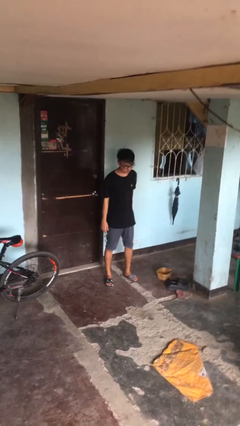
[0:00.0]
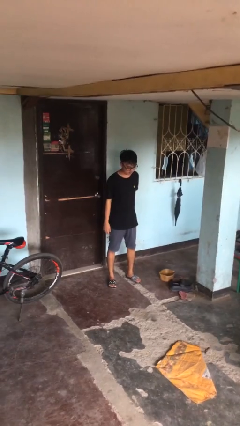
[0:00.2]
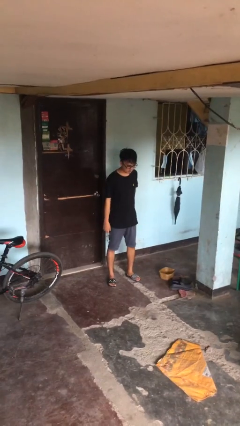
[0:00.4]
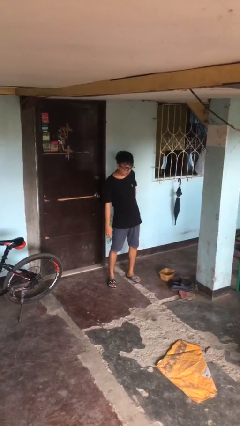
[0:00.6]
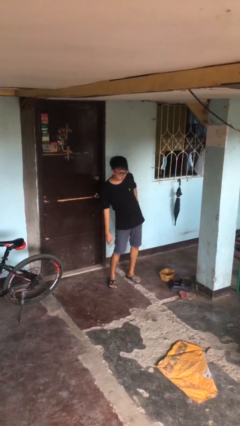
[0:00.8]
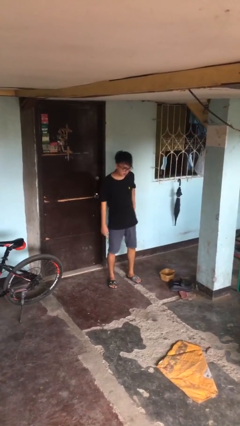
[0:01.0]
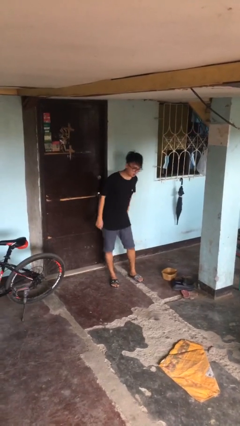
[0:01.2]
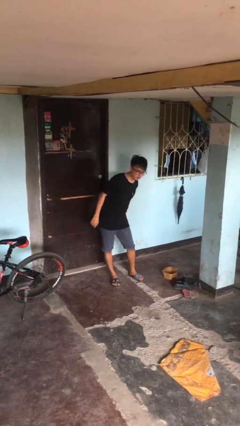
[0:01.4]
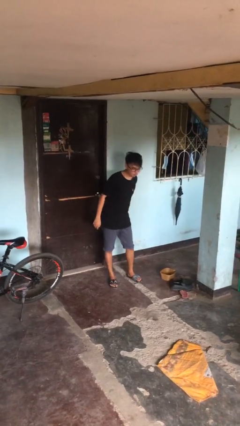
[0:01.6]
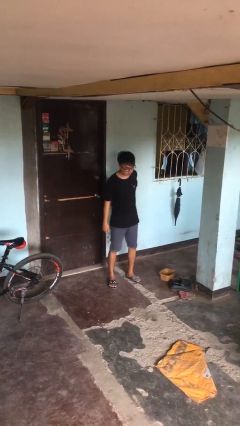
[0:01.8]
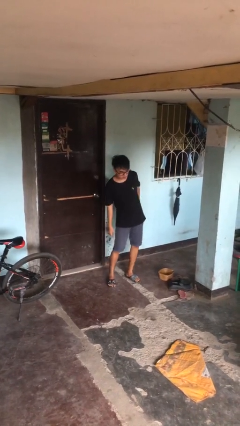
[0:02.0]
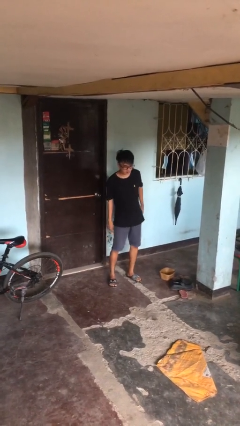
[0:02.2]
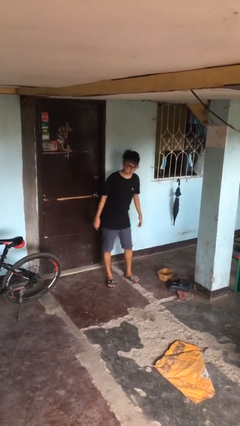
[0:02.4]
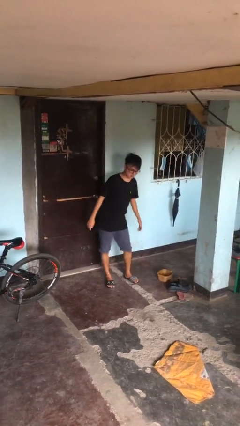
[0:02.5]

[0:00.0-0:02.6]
person wiggles hips

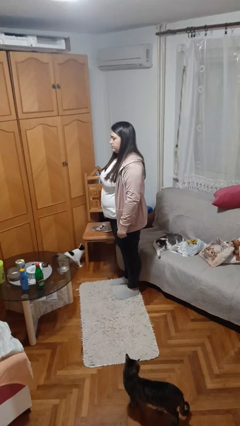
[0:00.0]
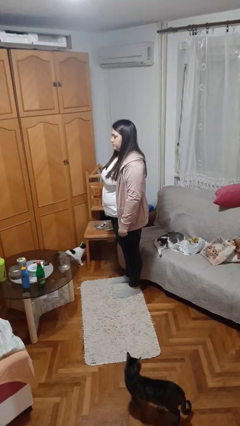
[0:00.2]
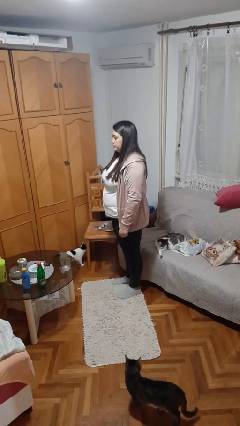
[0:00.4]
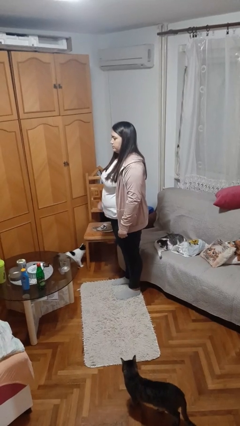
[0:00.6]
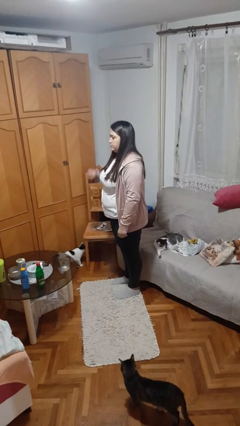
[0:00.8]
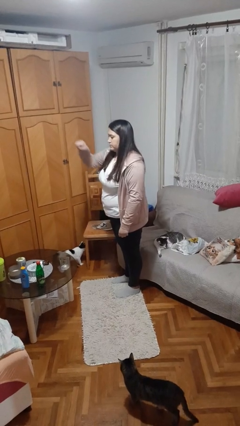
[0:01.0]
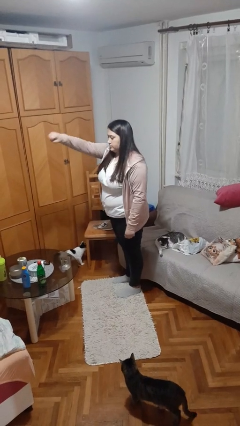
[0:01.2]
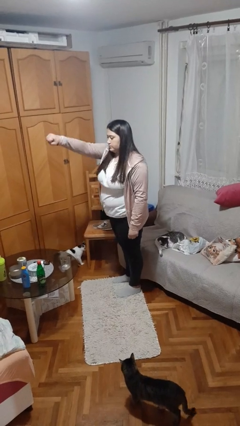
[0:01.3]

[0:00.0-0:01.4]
person punches

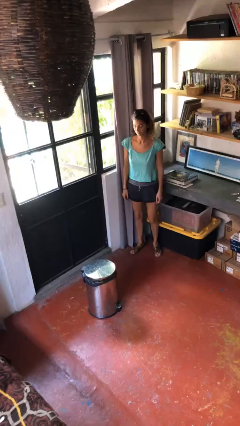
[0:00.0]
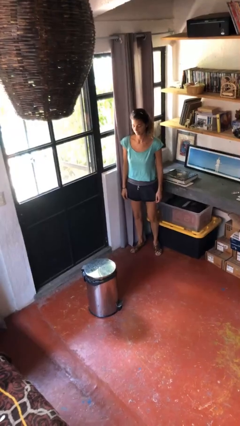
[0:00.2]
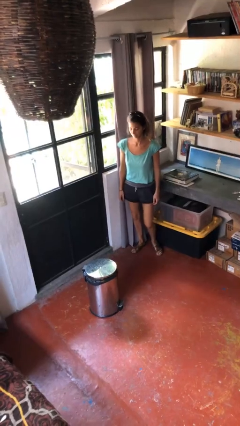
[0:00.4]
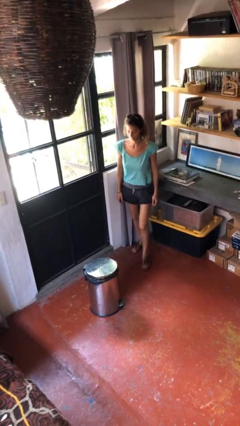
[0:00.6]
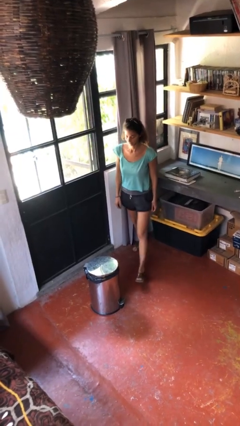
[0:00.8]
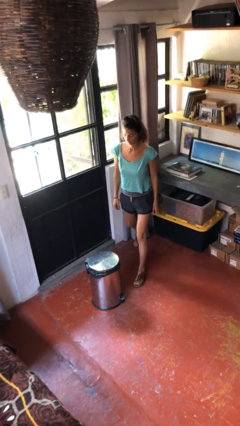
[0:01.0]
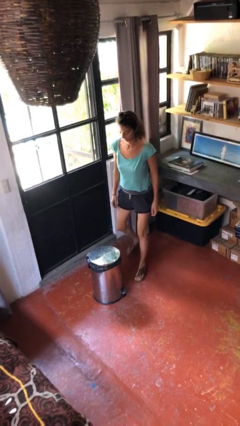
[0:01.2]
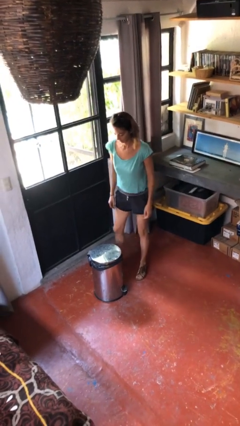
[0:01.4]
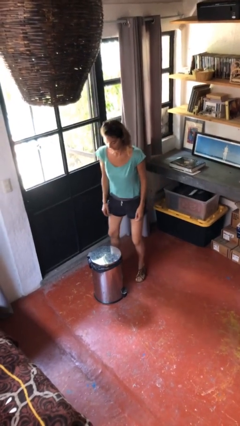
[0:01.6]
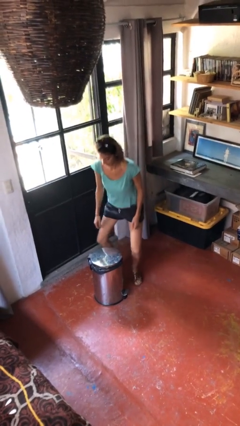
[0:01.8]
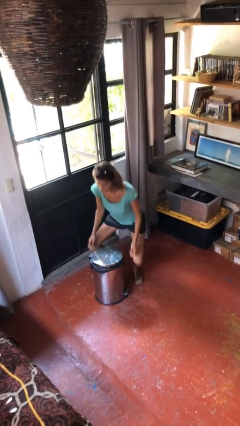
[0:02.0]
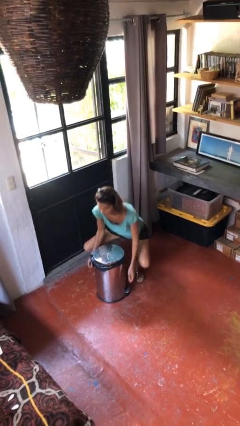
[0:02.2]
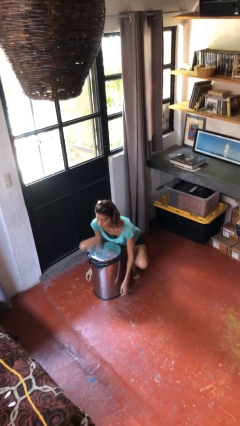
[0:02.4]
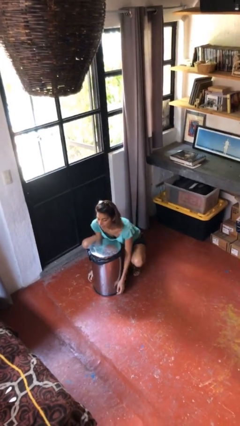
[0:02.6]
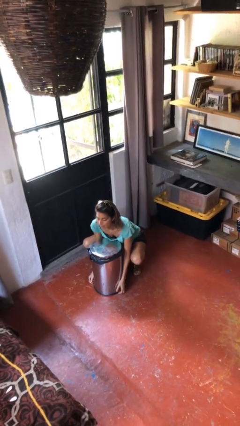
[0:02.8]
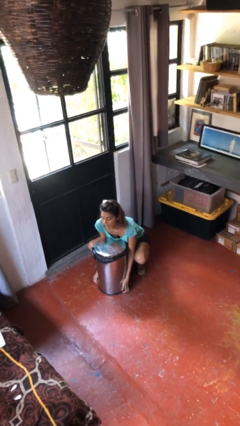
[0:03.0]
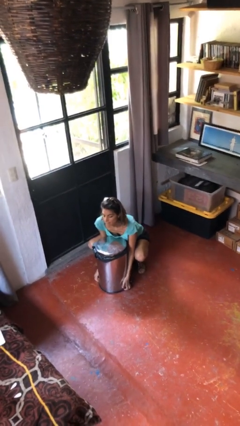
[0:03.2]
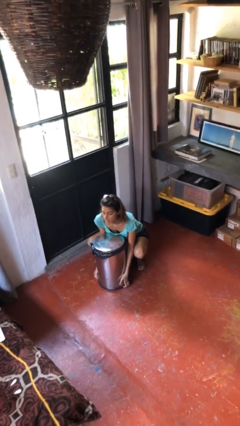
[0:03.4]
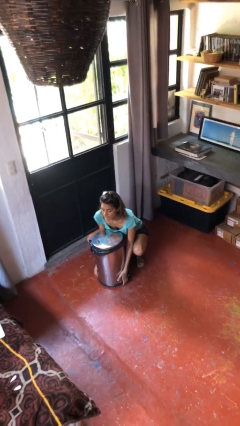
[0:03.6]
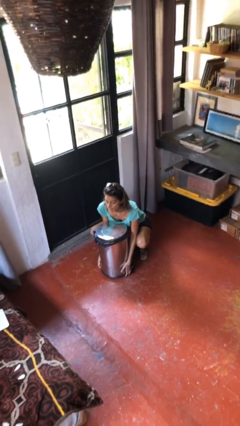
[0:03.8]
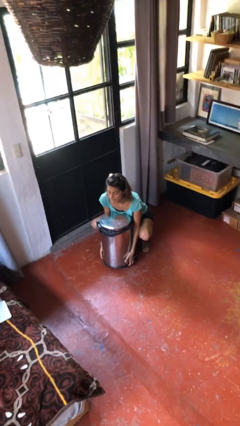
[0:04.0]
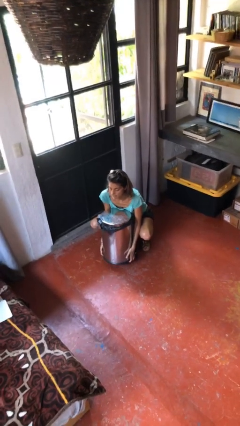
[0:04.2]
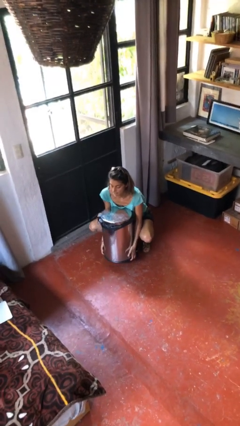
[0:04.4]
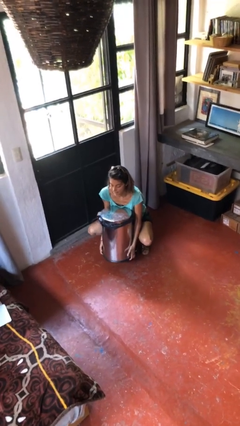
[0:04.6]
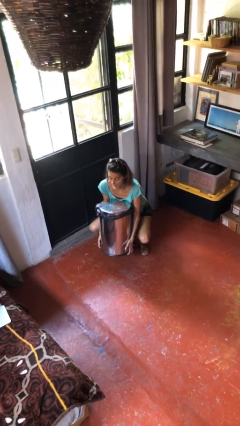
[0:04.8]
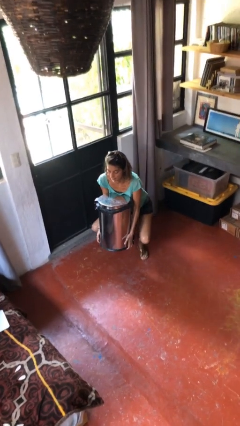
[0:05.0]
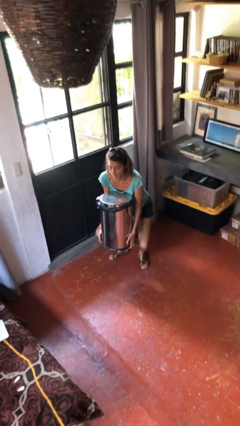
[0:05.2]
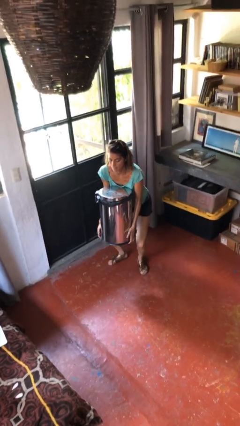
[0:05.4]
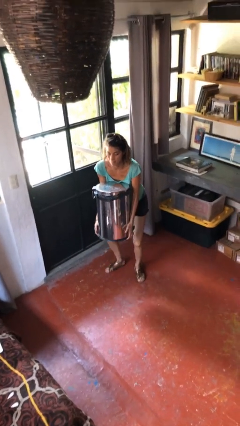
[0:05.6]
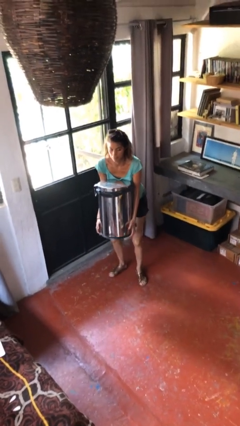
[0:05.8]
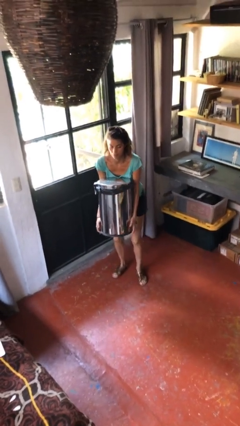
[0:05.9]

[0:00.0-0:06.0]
person picks up object from floor

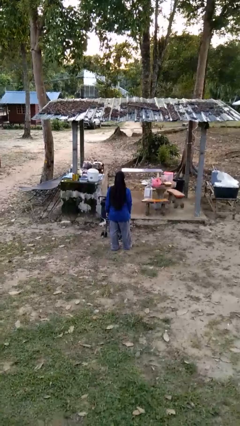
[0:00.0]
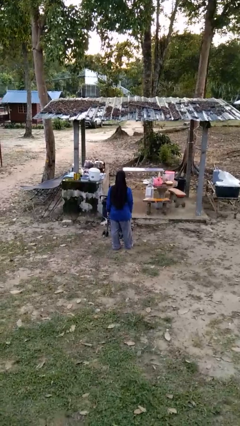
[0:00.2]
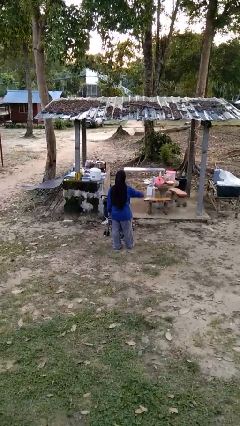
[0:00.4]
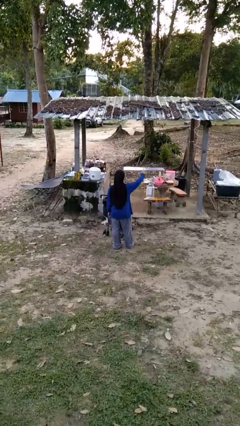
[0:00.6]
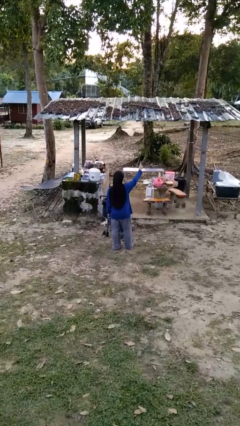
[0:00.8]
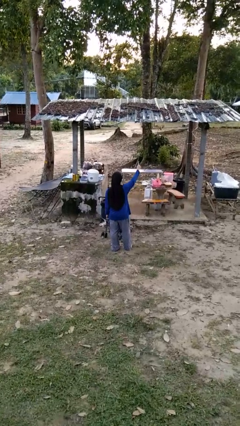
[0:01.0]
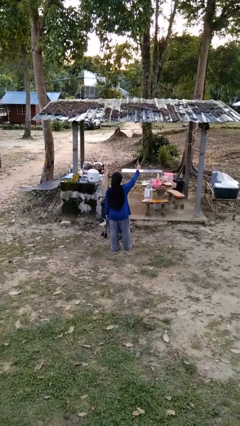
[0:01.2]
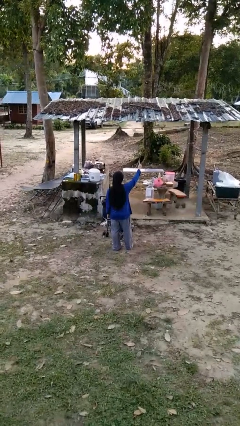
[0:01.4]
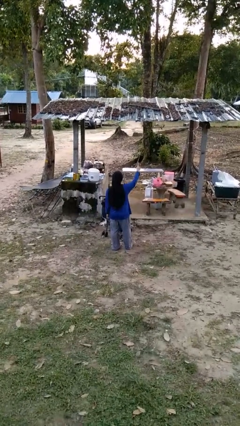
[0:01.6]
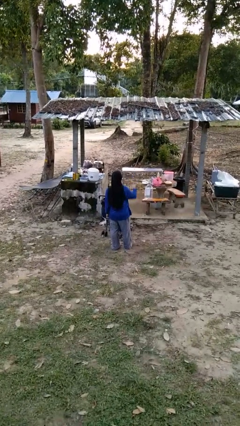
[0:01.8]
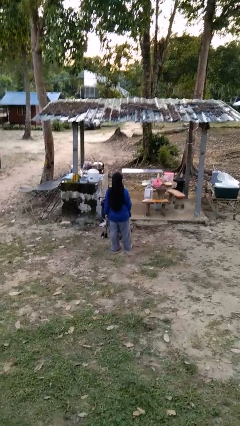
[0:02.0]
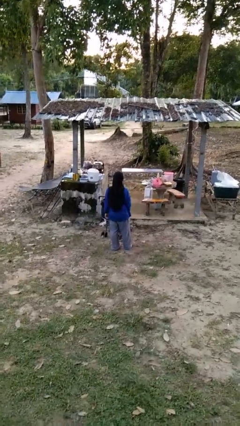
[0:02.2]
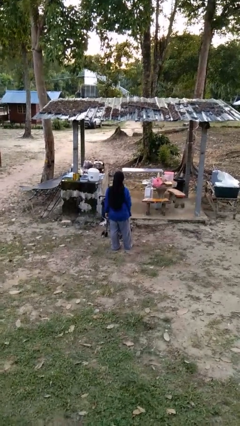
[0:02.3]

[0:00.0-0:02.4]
person gestures number one

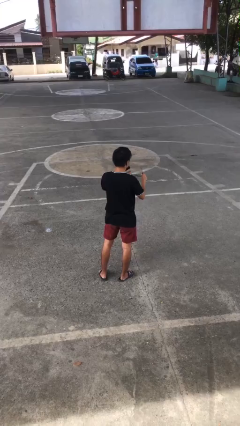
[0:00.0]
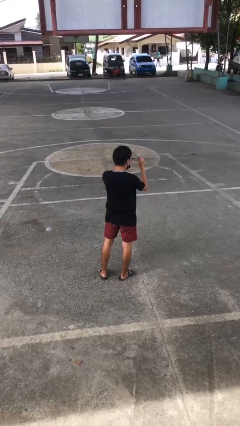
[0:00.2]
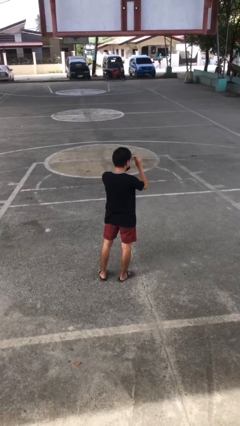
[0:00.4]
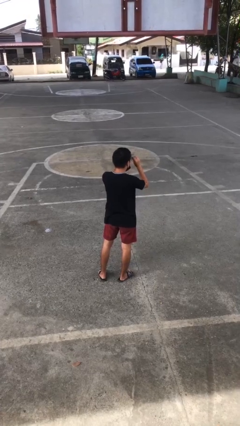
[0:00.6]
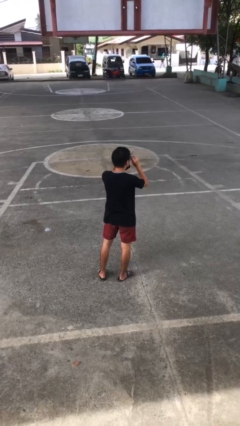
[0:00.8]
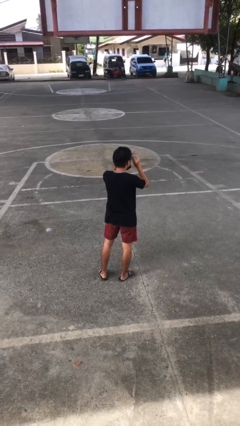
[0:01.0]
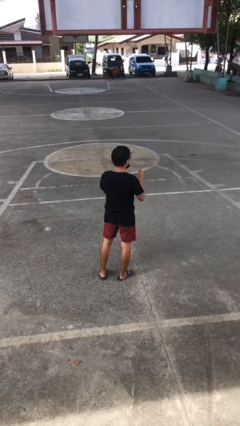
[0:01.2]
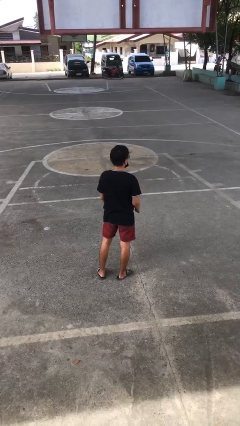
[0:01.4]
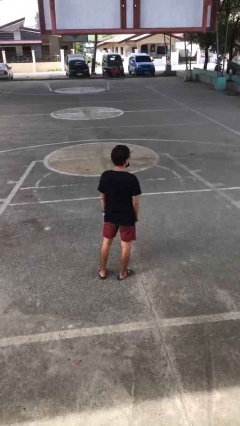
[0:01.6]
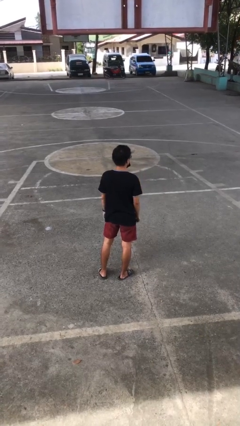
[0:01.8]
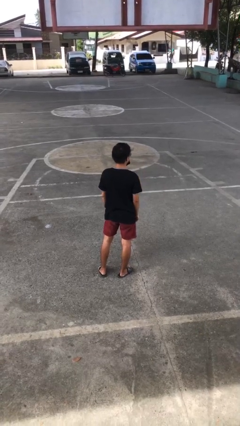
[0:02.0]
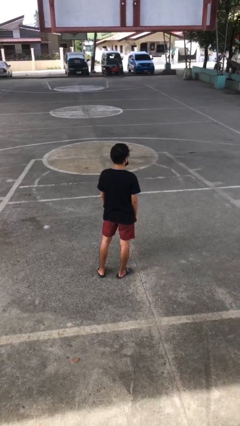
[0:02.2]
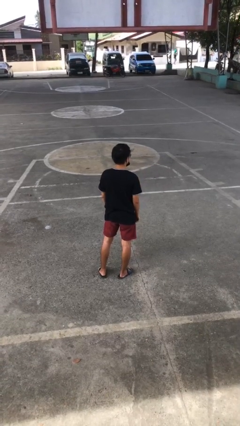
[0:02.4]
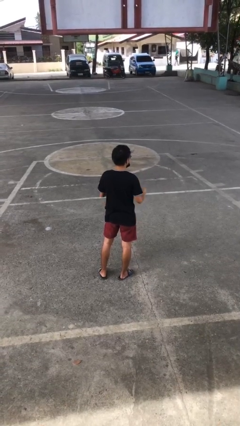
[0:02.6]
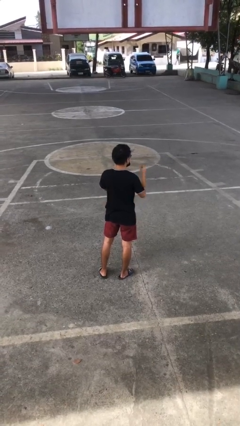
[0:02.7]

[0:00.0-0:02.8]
person puts on glasses

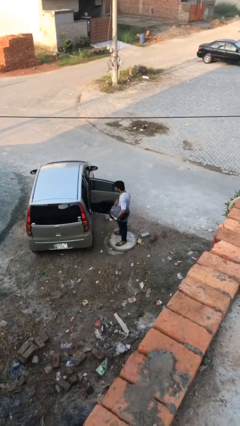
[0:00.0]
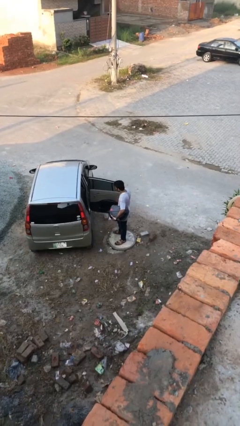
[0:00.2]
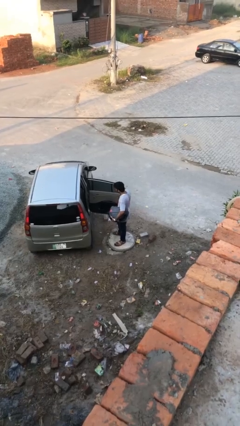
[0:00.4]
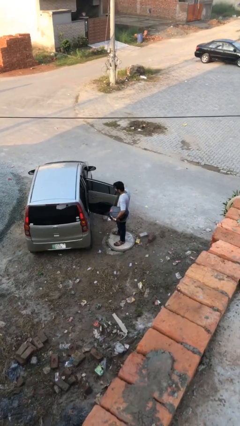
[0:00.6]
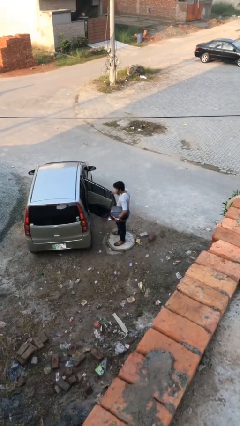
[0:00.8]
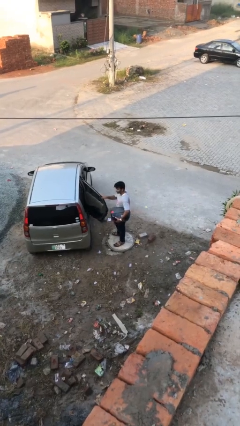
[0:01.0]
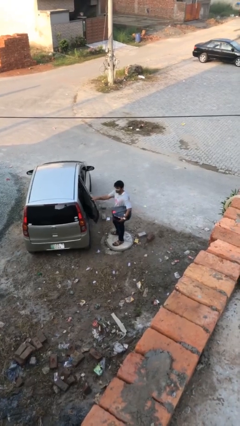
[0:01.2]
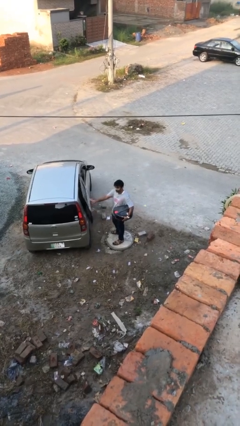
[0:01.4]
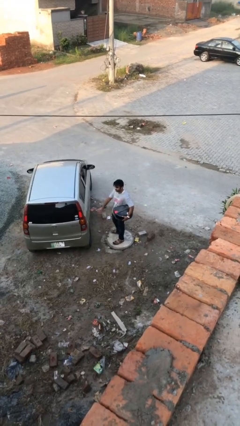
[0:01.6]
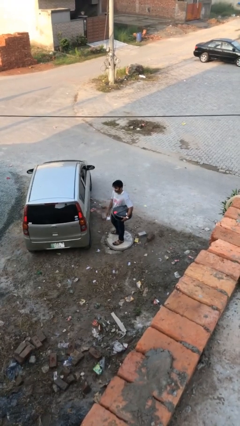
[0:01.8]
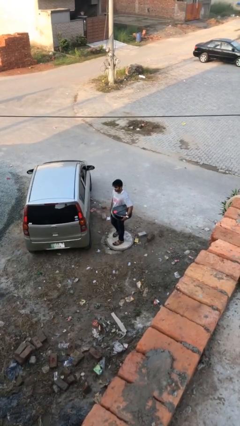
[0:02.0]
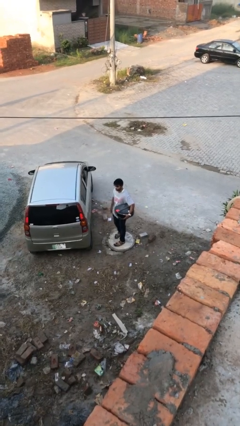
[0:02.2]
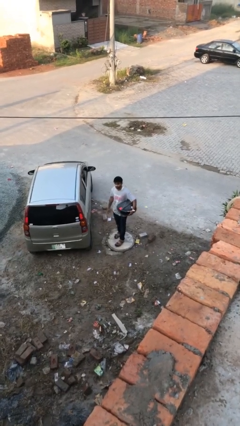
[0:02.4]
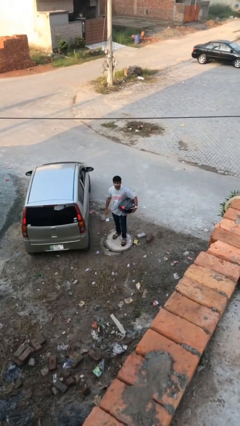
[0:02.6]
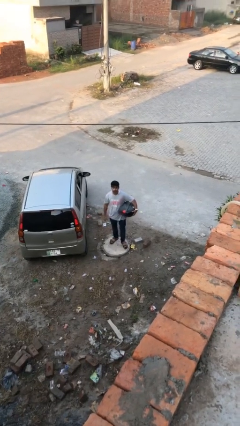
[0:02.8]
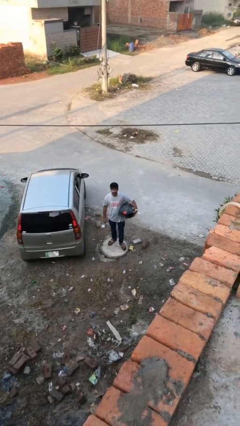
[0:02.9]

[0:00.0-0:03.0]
person closes car door
